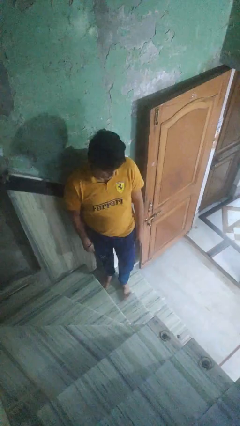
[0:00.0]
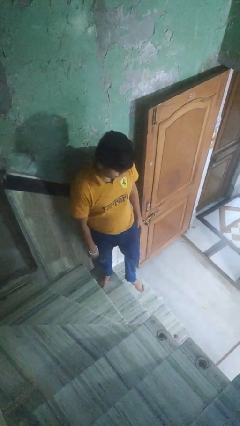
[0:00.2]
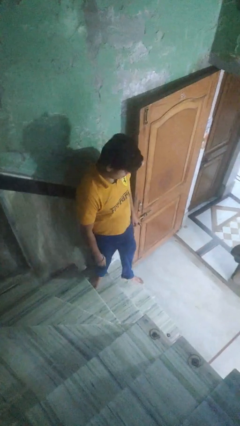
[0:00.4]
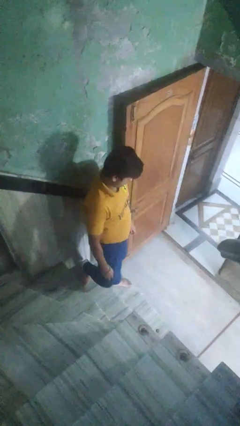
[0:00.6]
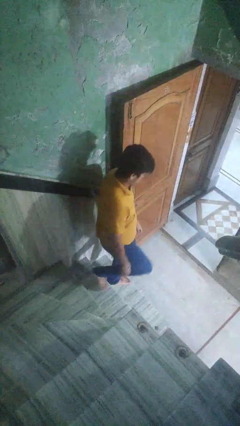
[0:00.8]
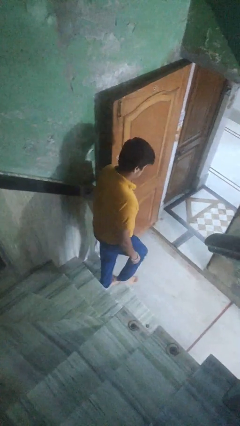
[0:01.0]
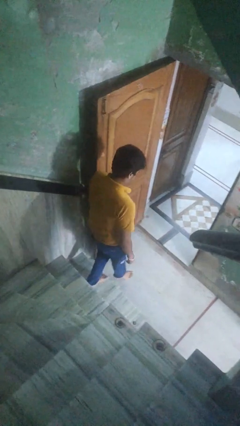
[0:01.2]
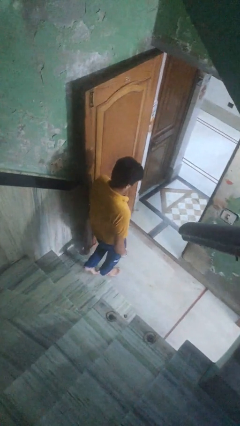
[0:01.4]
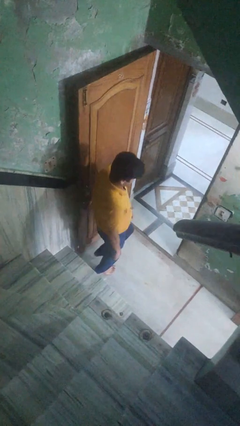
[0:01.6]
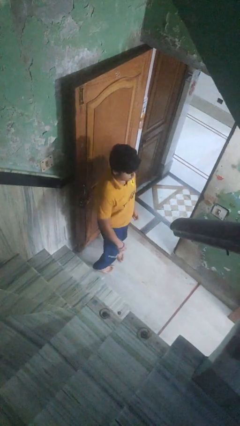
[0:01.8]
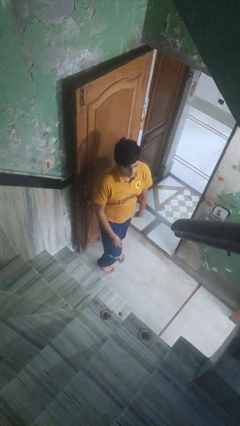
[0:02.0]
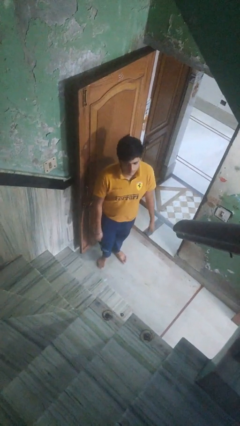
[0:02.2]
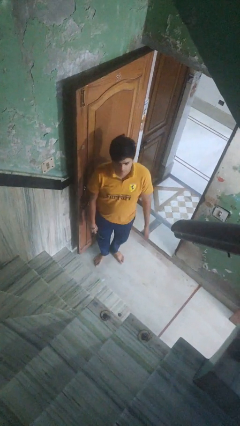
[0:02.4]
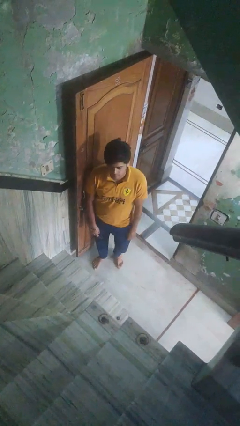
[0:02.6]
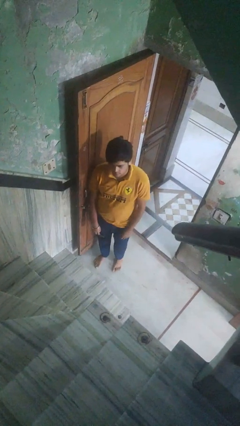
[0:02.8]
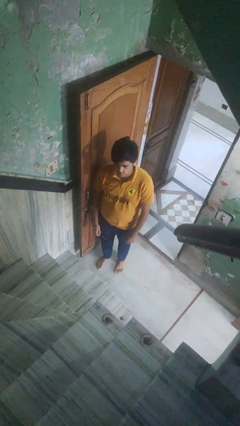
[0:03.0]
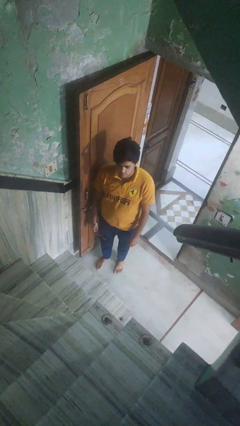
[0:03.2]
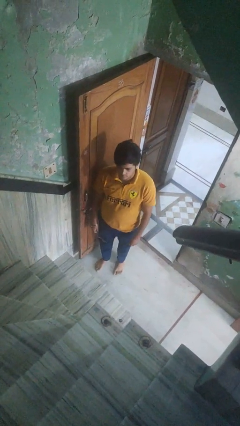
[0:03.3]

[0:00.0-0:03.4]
person climbs down stairs

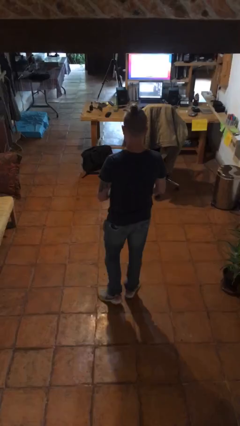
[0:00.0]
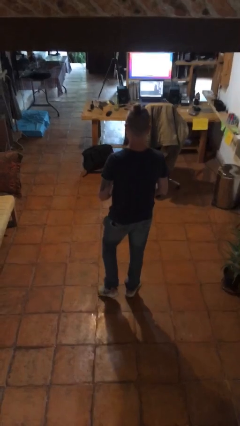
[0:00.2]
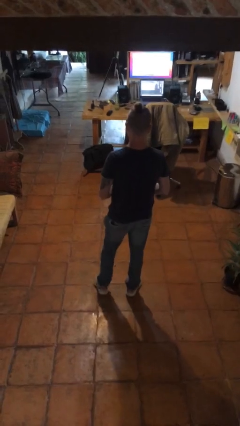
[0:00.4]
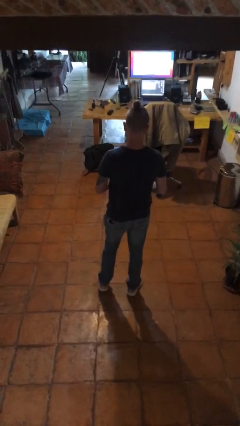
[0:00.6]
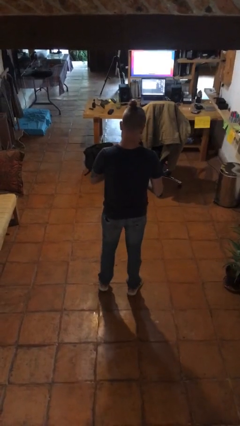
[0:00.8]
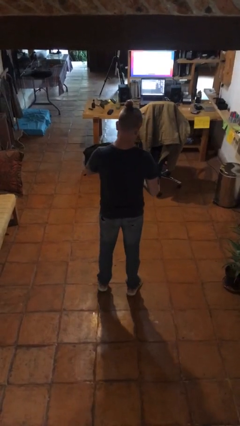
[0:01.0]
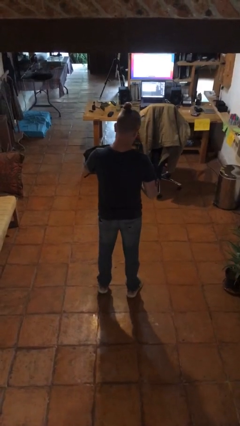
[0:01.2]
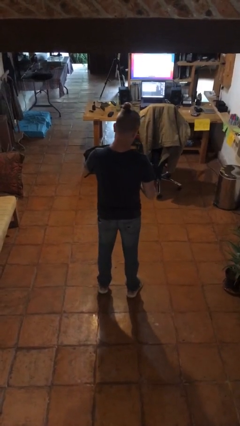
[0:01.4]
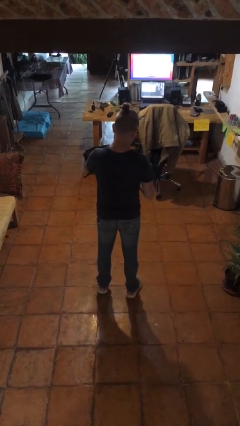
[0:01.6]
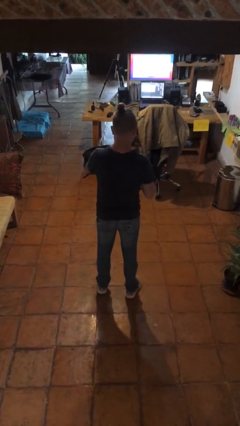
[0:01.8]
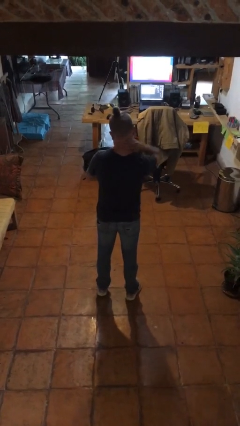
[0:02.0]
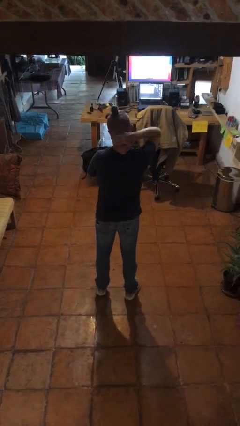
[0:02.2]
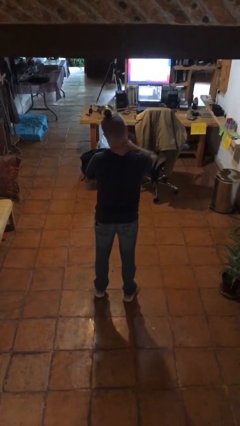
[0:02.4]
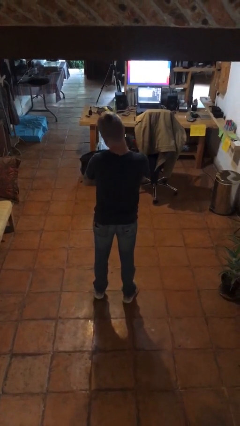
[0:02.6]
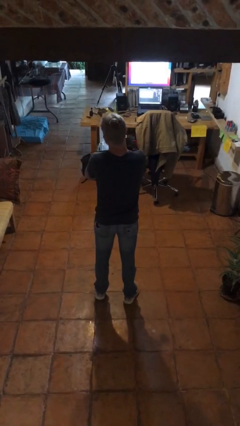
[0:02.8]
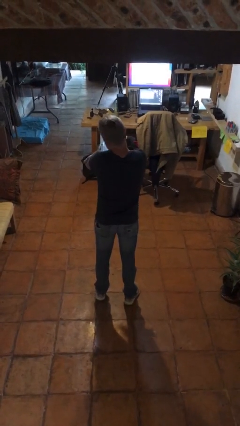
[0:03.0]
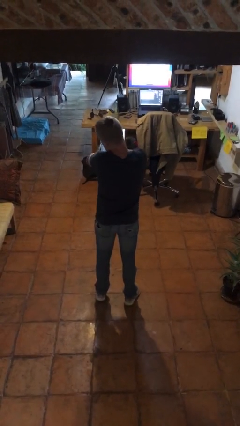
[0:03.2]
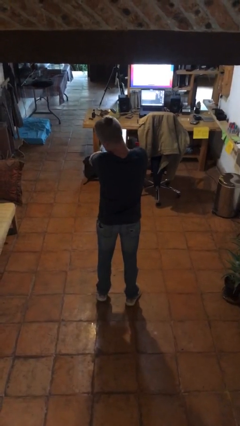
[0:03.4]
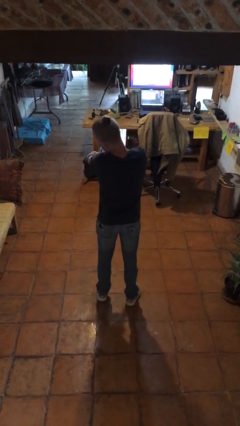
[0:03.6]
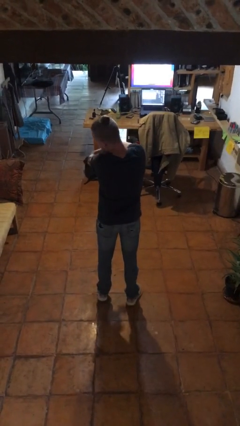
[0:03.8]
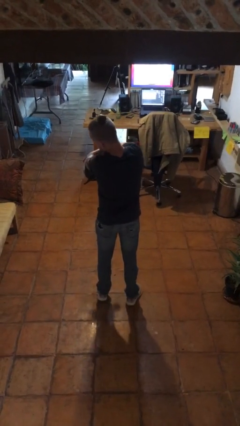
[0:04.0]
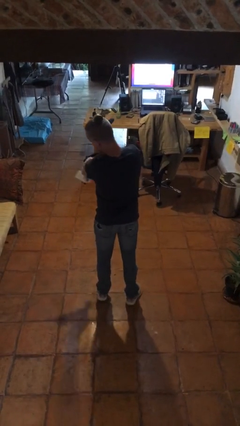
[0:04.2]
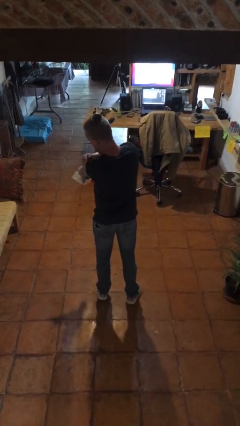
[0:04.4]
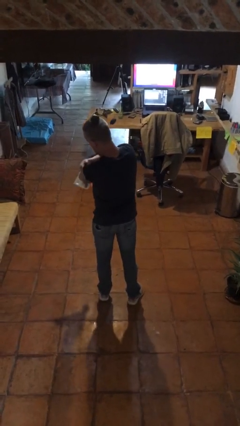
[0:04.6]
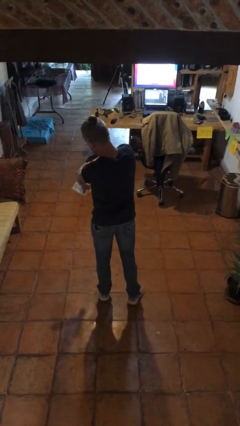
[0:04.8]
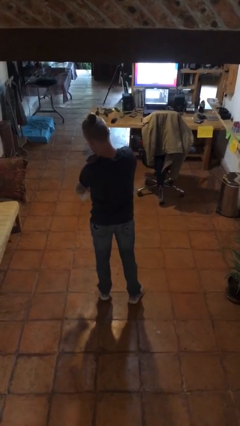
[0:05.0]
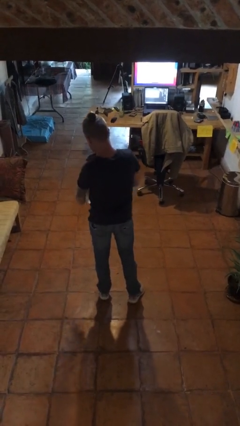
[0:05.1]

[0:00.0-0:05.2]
person applies sunscreen

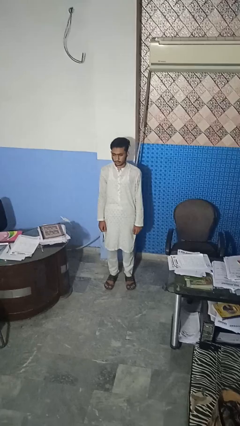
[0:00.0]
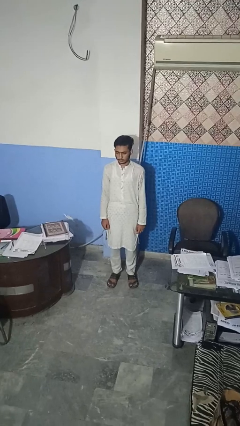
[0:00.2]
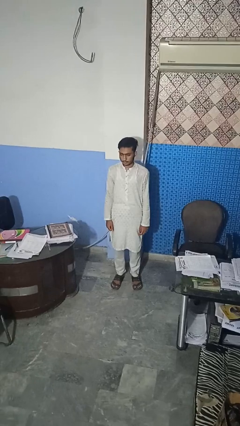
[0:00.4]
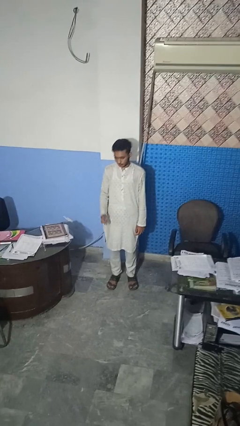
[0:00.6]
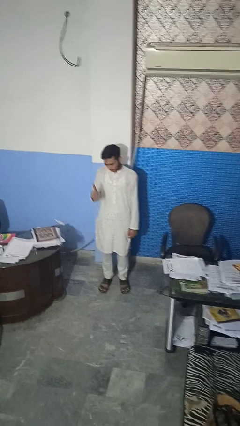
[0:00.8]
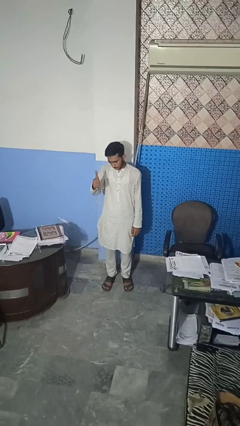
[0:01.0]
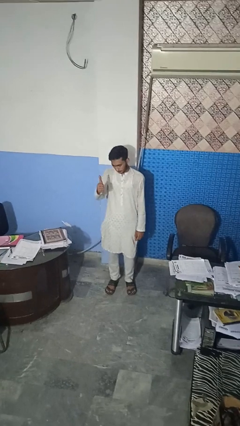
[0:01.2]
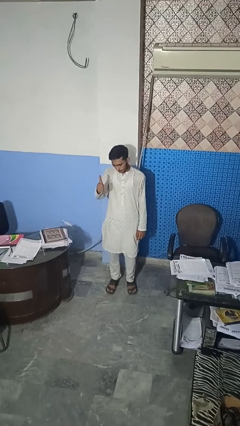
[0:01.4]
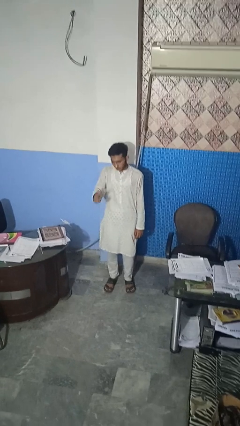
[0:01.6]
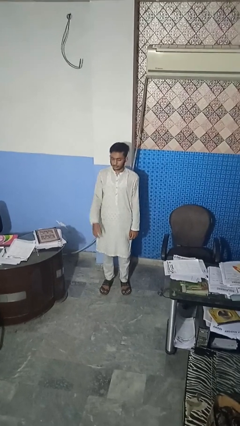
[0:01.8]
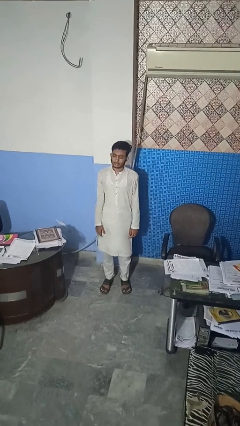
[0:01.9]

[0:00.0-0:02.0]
person gestures thumbs up

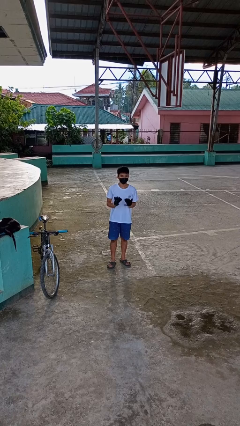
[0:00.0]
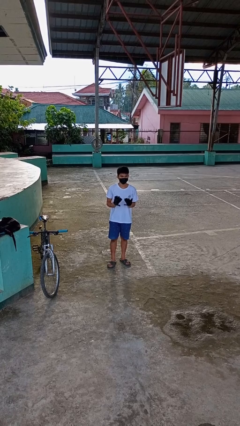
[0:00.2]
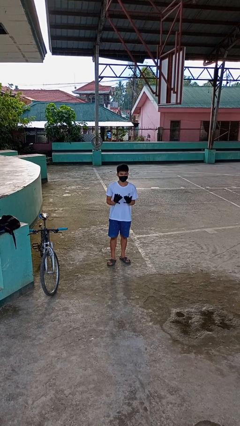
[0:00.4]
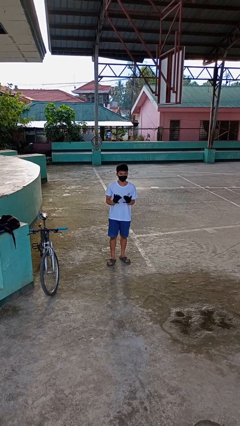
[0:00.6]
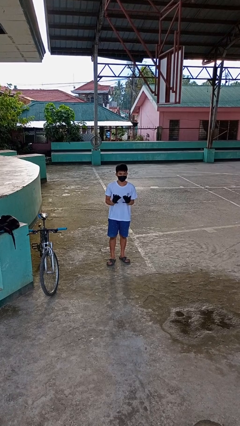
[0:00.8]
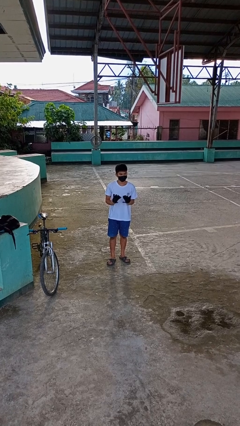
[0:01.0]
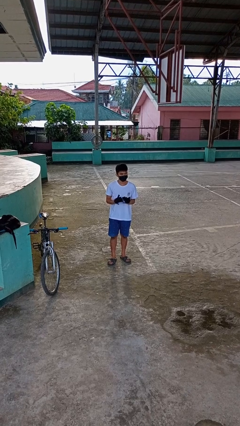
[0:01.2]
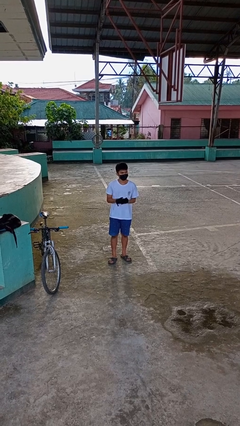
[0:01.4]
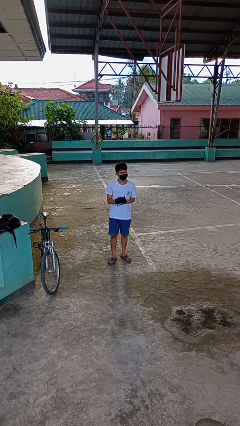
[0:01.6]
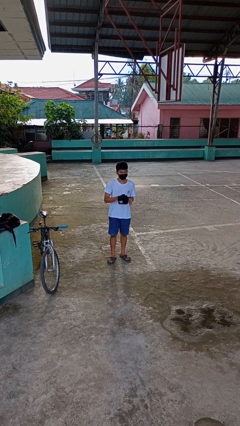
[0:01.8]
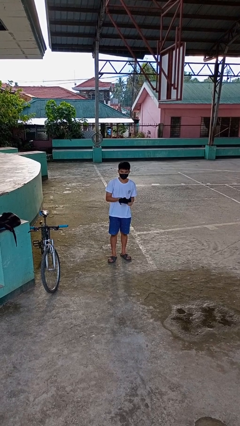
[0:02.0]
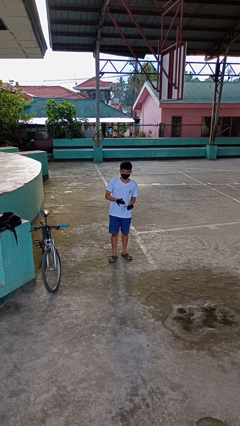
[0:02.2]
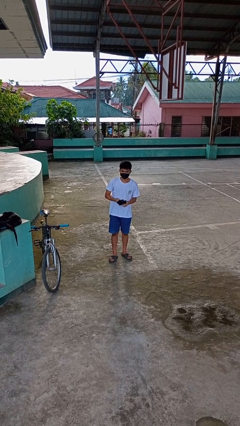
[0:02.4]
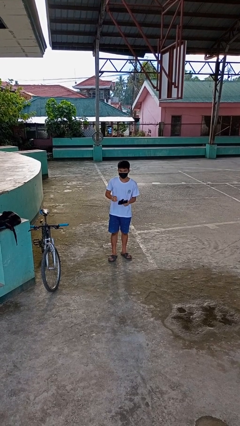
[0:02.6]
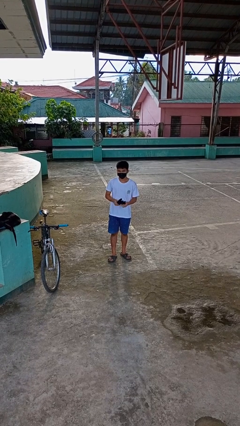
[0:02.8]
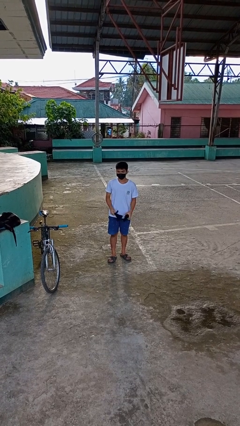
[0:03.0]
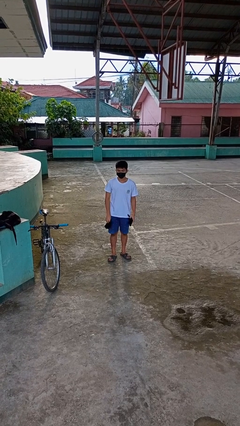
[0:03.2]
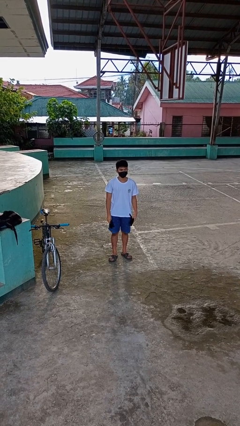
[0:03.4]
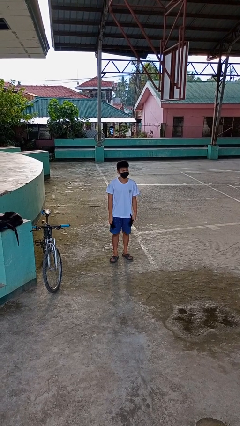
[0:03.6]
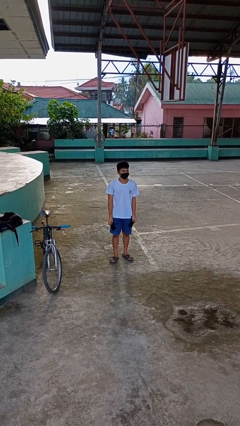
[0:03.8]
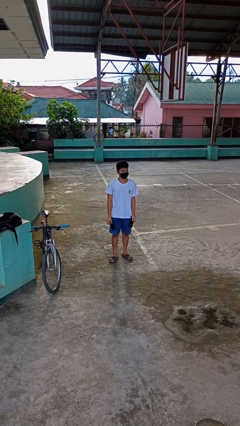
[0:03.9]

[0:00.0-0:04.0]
person takes off gloves

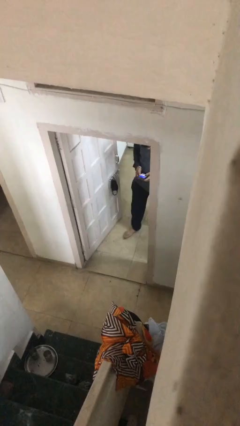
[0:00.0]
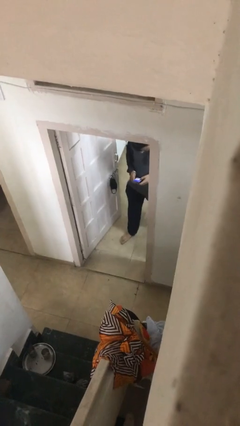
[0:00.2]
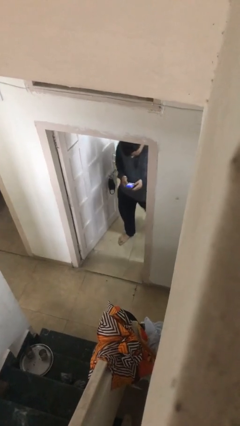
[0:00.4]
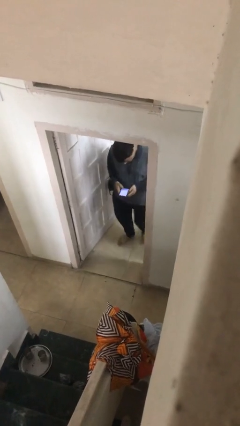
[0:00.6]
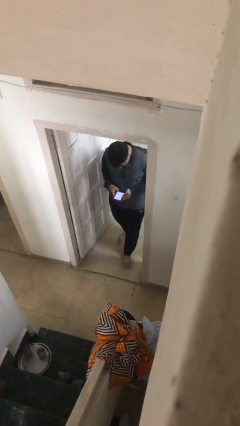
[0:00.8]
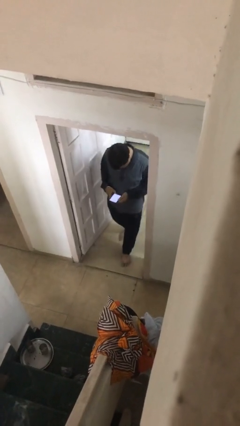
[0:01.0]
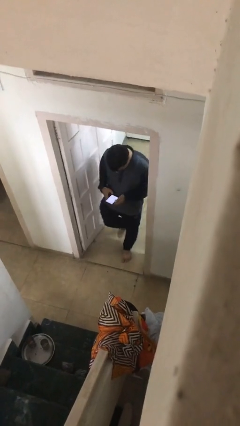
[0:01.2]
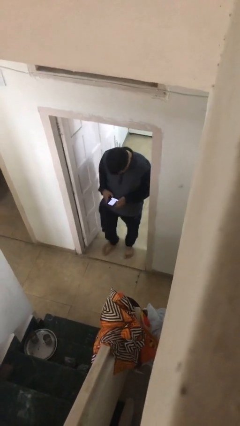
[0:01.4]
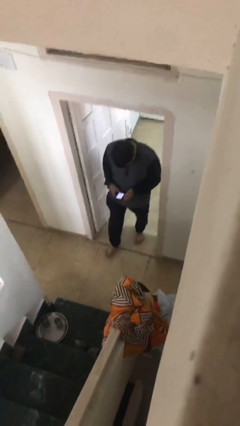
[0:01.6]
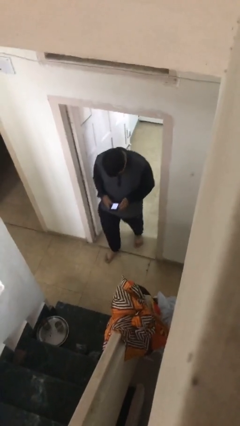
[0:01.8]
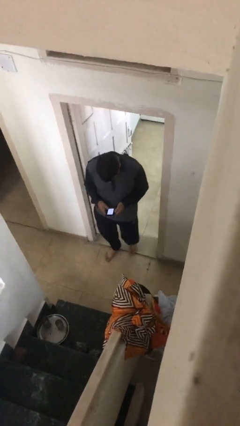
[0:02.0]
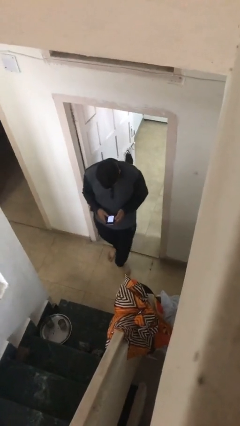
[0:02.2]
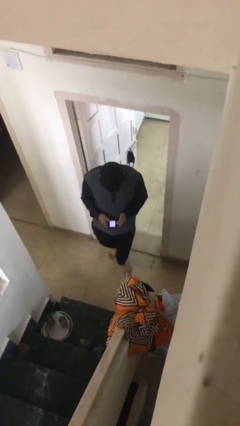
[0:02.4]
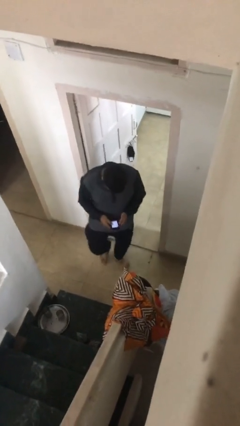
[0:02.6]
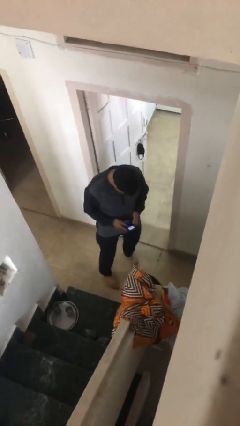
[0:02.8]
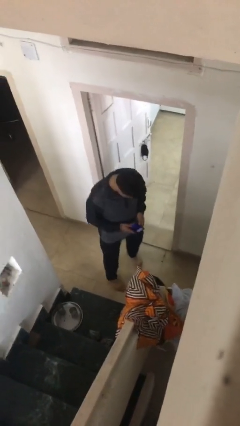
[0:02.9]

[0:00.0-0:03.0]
person enters scene through structure
